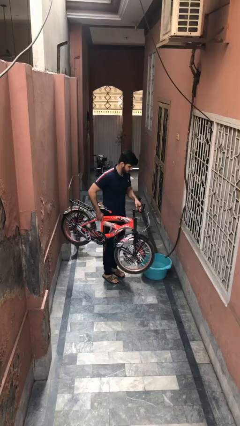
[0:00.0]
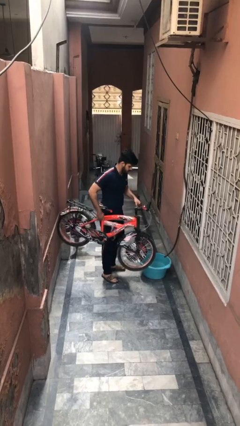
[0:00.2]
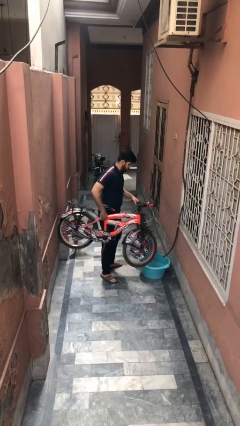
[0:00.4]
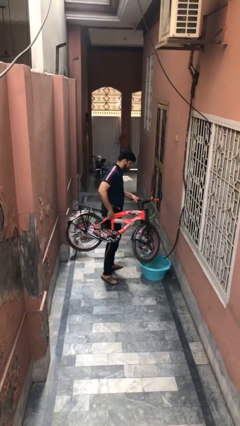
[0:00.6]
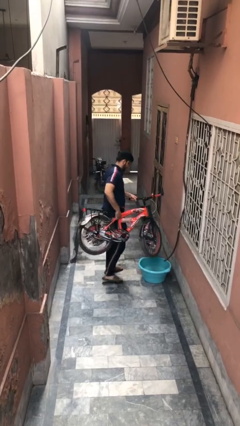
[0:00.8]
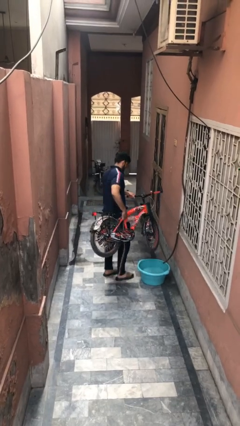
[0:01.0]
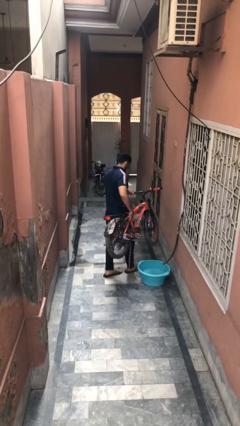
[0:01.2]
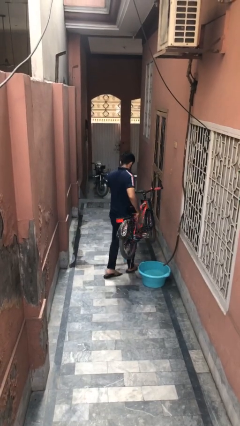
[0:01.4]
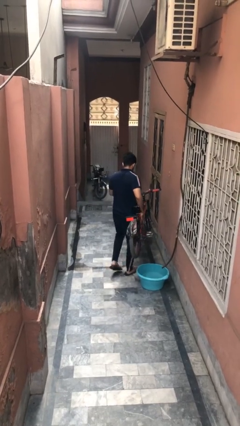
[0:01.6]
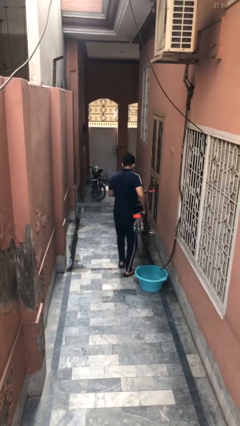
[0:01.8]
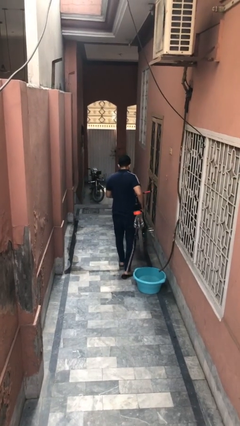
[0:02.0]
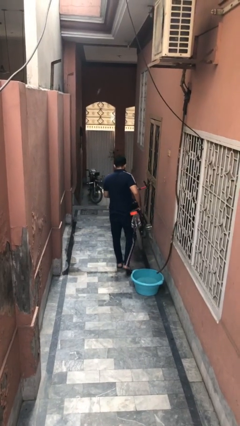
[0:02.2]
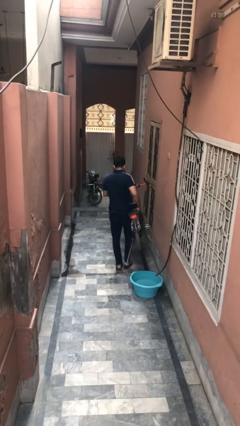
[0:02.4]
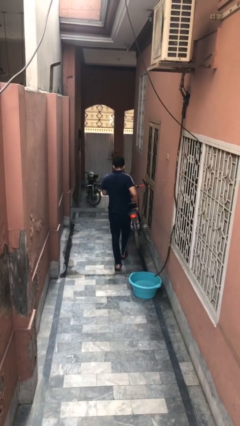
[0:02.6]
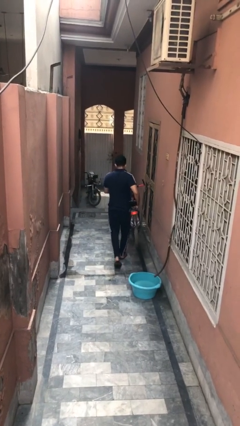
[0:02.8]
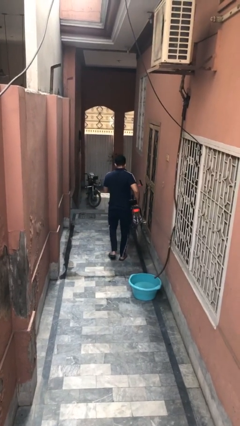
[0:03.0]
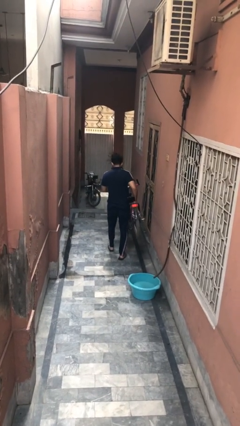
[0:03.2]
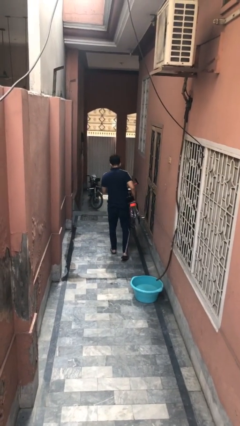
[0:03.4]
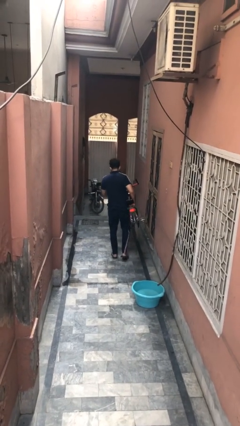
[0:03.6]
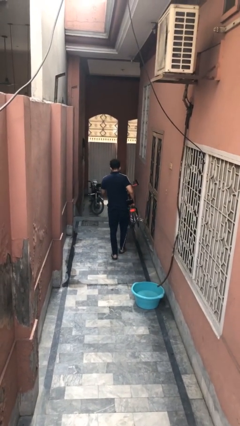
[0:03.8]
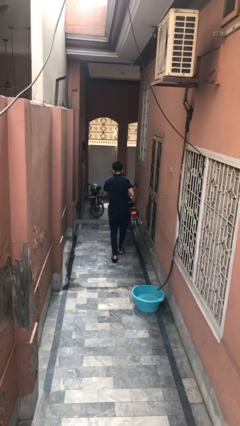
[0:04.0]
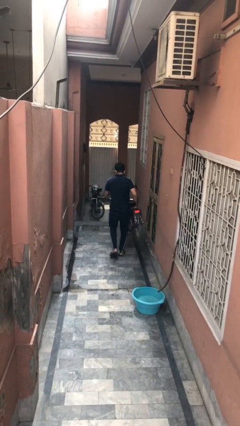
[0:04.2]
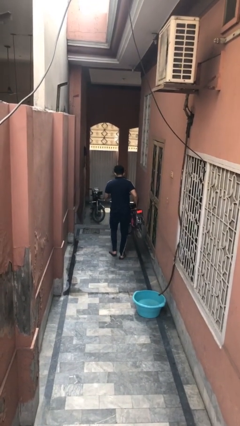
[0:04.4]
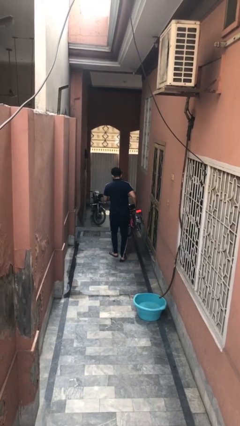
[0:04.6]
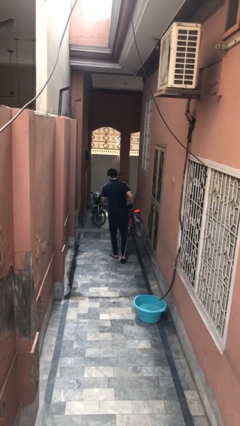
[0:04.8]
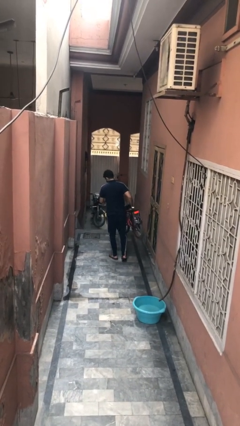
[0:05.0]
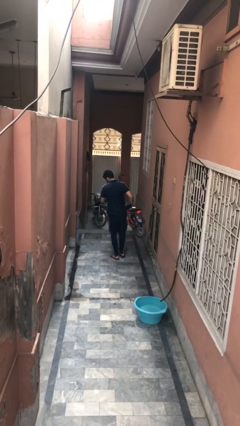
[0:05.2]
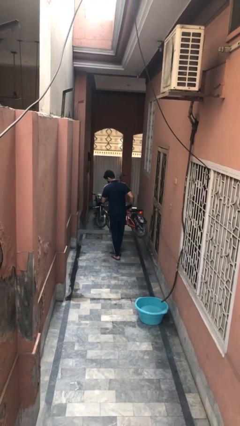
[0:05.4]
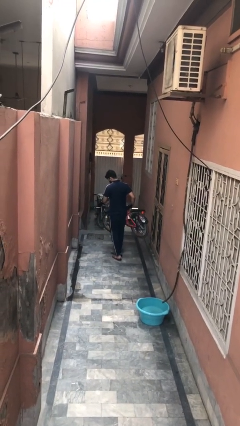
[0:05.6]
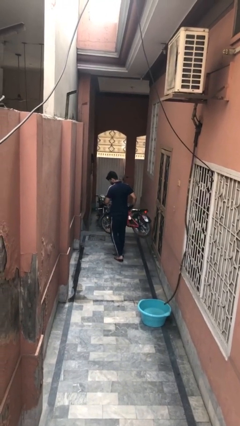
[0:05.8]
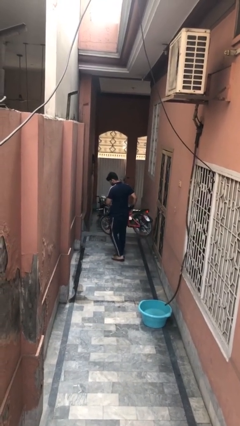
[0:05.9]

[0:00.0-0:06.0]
person carries bicycle

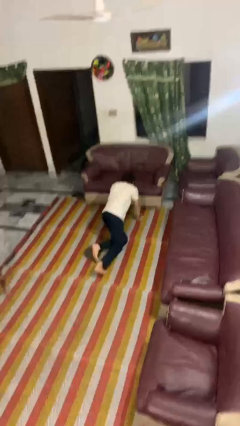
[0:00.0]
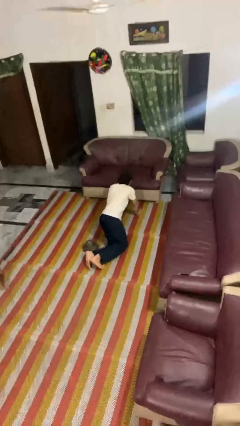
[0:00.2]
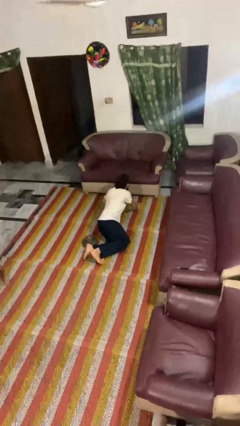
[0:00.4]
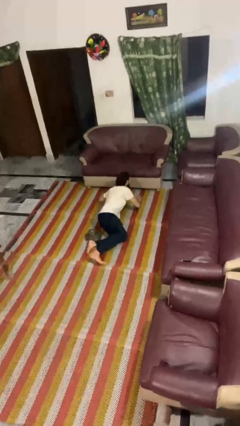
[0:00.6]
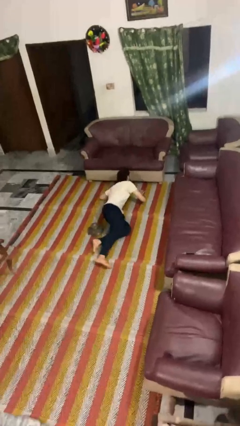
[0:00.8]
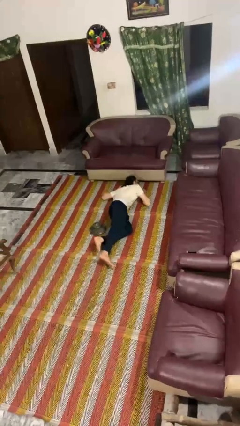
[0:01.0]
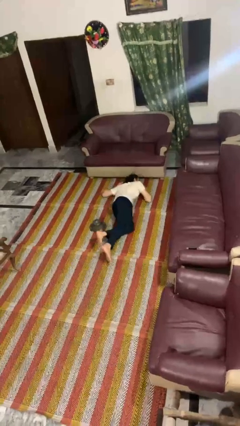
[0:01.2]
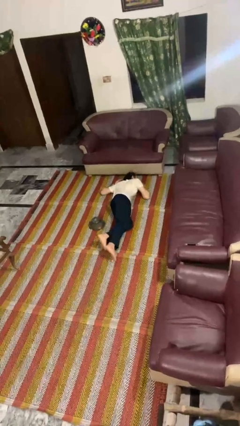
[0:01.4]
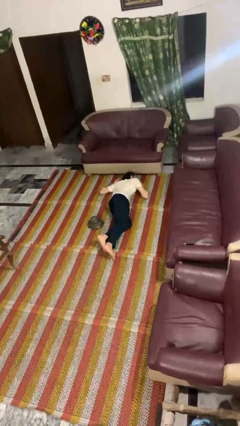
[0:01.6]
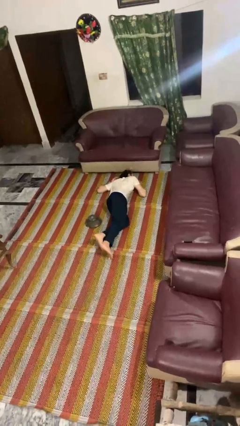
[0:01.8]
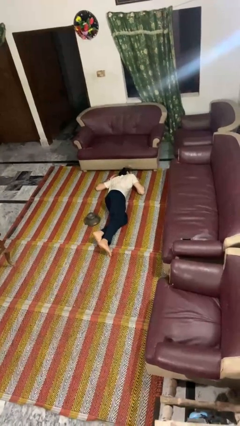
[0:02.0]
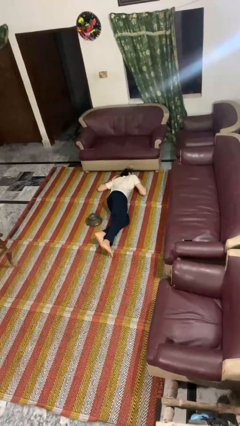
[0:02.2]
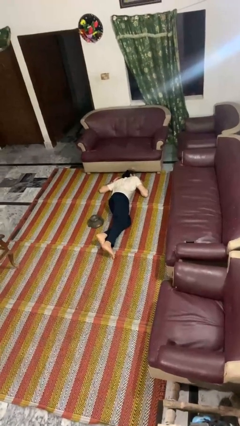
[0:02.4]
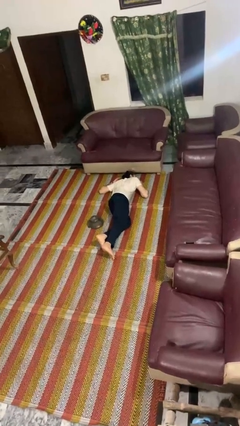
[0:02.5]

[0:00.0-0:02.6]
person lies down on floor

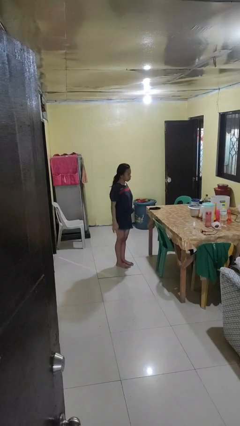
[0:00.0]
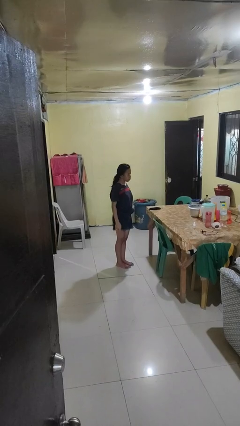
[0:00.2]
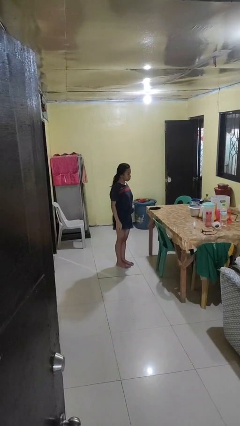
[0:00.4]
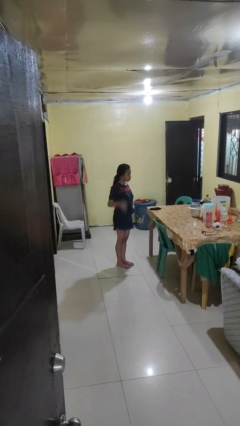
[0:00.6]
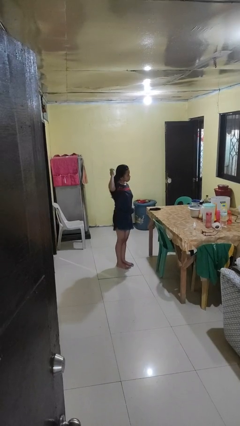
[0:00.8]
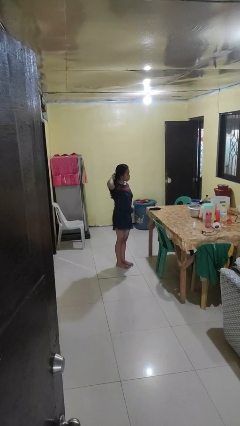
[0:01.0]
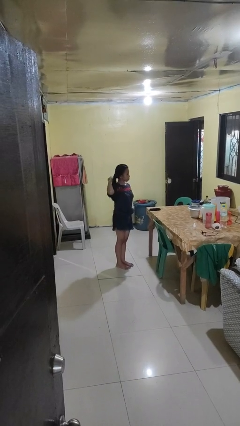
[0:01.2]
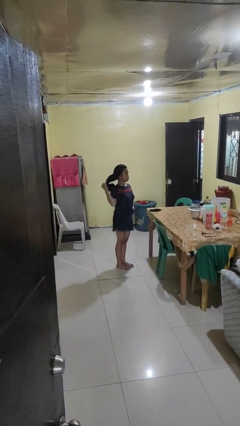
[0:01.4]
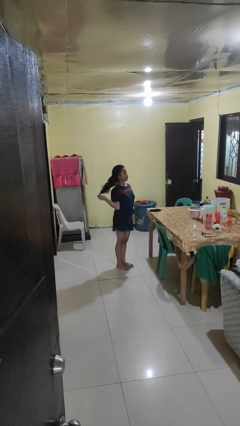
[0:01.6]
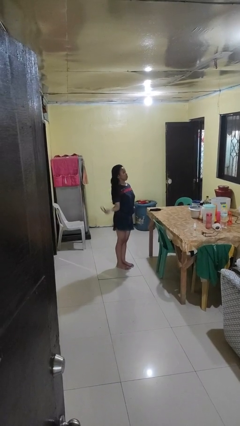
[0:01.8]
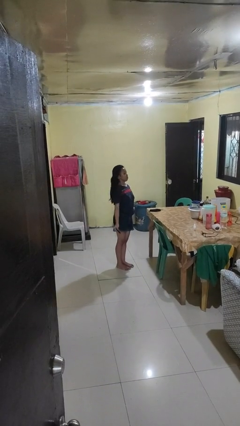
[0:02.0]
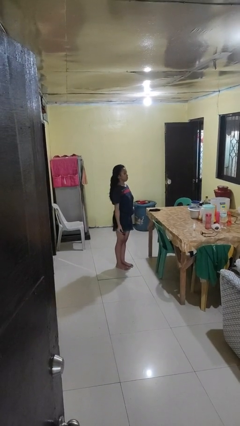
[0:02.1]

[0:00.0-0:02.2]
person takes off hairtie

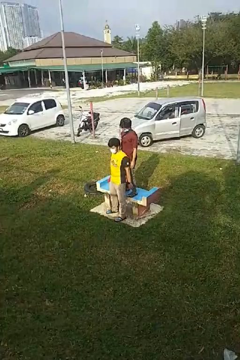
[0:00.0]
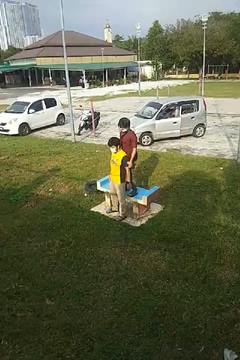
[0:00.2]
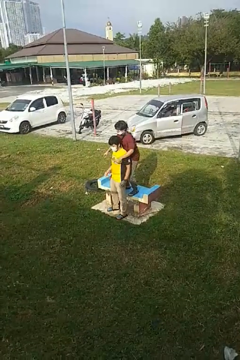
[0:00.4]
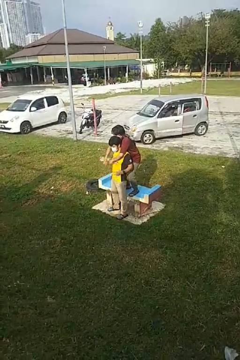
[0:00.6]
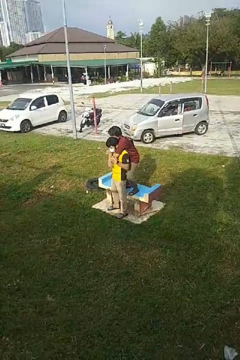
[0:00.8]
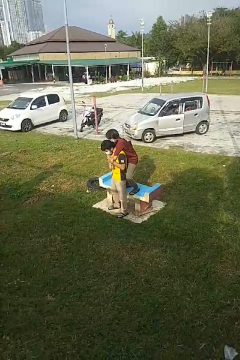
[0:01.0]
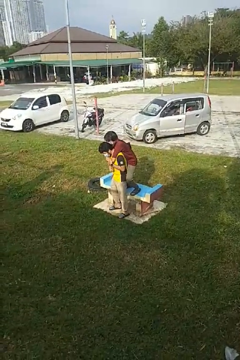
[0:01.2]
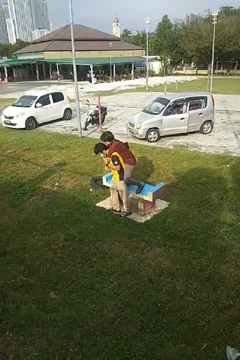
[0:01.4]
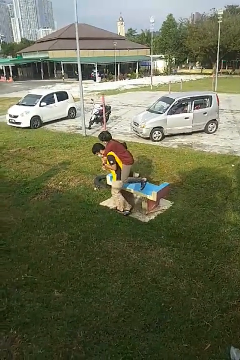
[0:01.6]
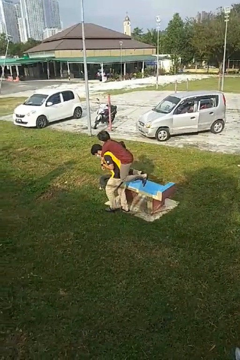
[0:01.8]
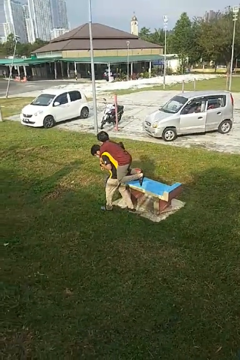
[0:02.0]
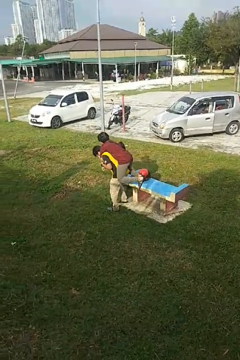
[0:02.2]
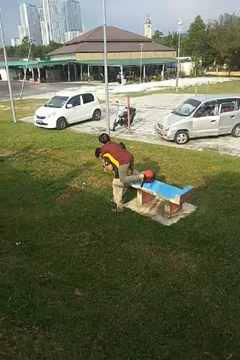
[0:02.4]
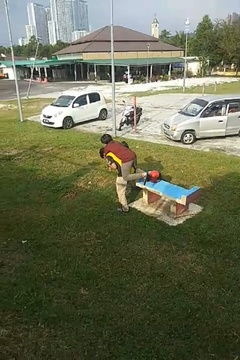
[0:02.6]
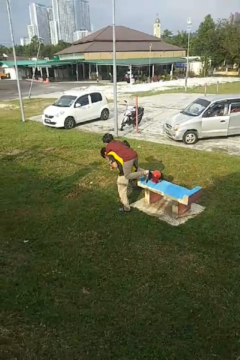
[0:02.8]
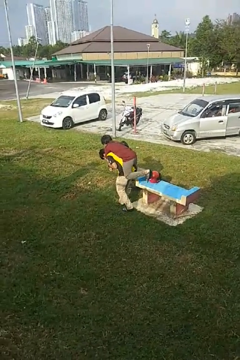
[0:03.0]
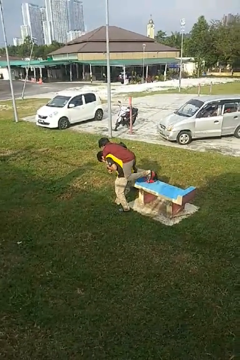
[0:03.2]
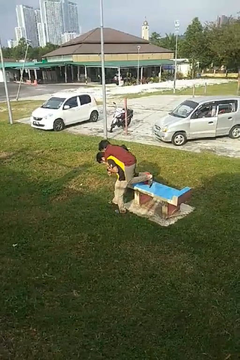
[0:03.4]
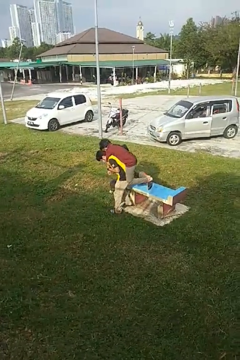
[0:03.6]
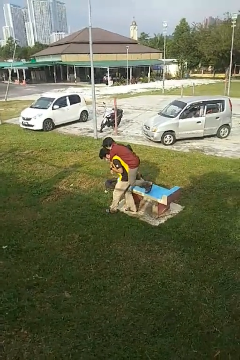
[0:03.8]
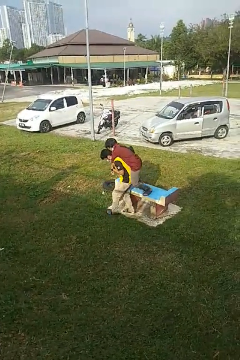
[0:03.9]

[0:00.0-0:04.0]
person carries person over shoulder

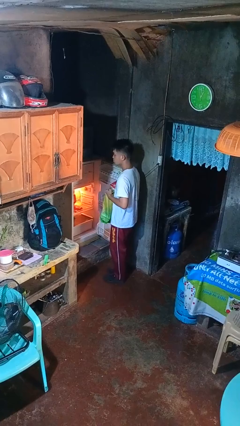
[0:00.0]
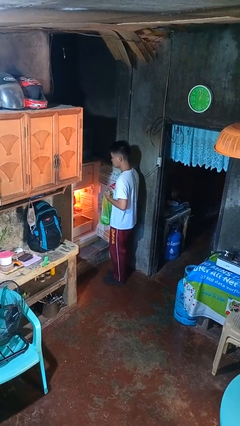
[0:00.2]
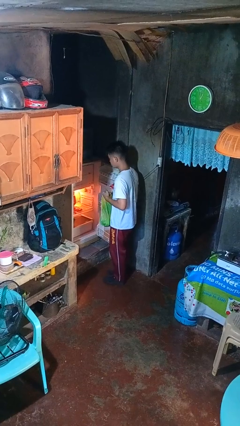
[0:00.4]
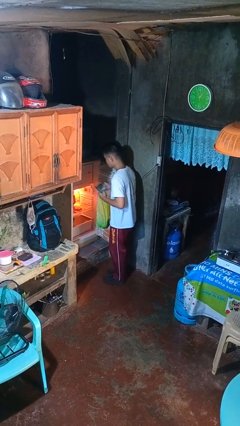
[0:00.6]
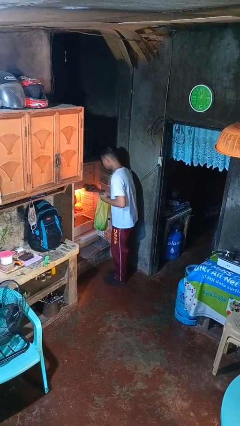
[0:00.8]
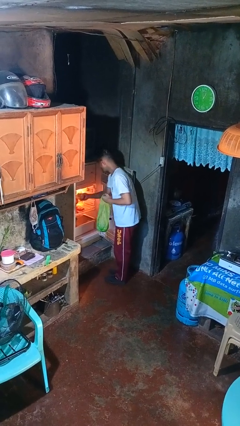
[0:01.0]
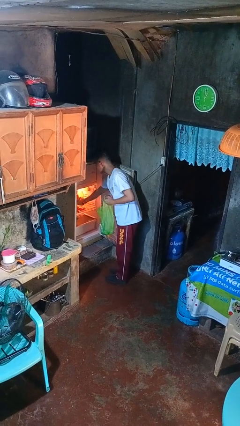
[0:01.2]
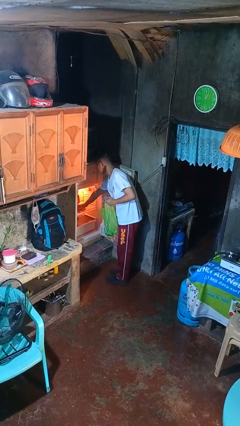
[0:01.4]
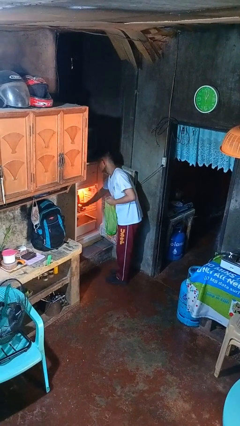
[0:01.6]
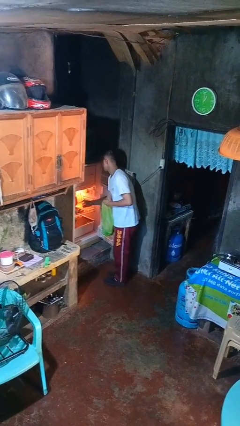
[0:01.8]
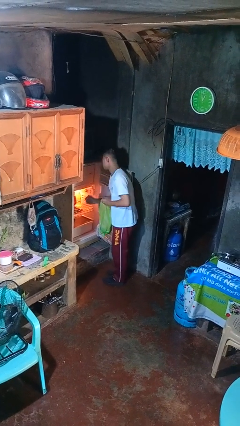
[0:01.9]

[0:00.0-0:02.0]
person loads groceries into refrigerator

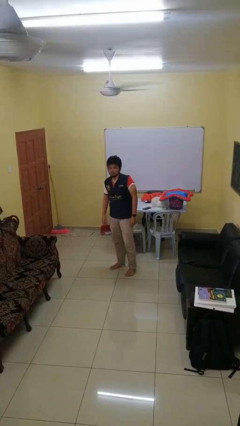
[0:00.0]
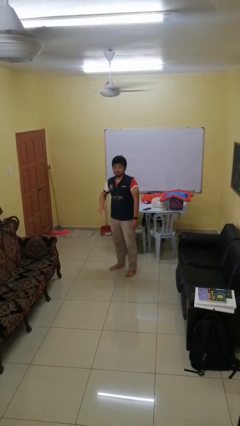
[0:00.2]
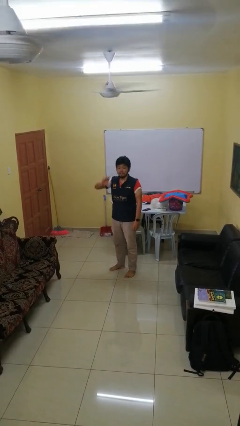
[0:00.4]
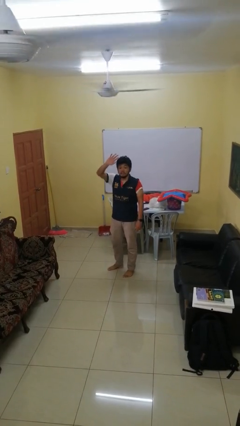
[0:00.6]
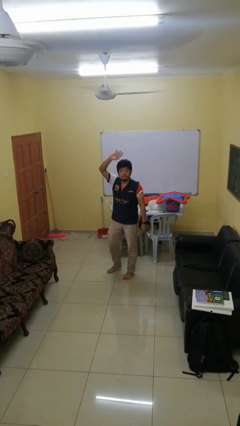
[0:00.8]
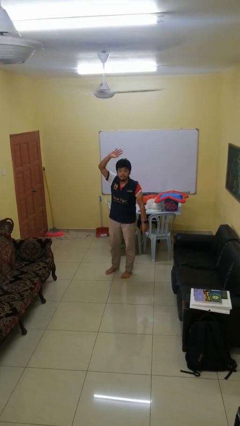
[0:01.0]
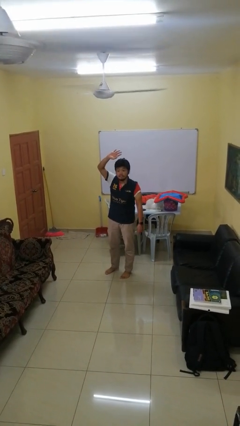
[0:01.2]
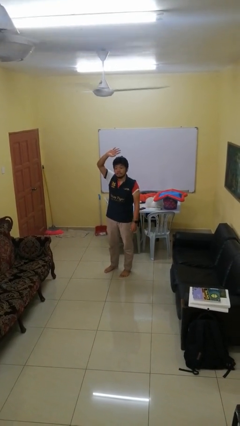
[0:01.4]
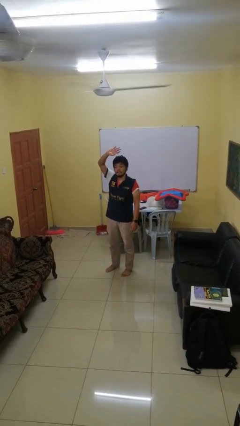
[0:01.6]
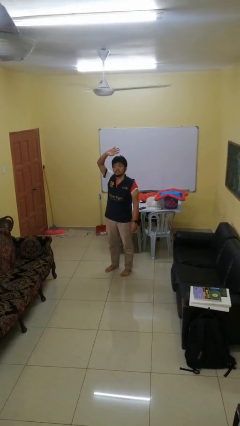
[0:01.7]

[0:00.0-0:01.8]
person gestures raise hand
